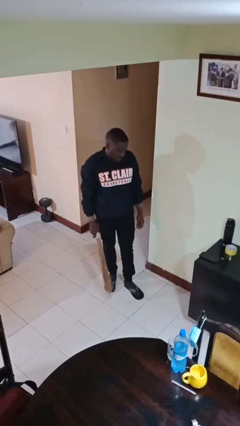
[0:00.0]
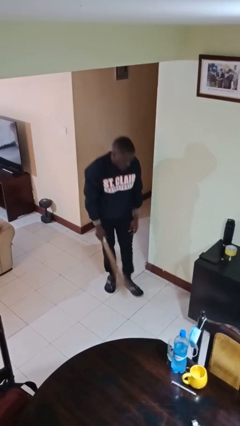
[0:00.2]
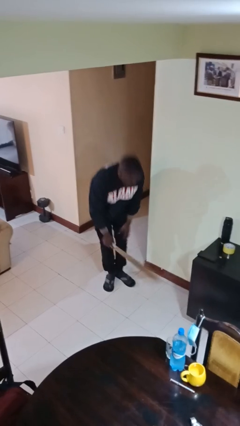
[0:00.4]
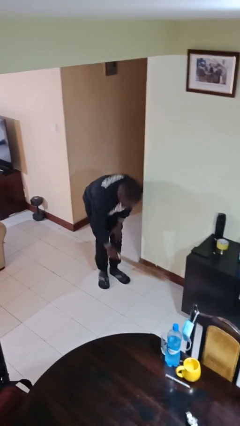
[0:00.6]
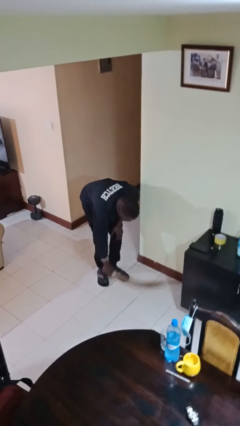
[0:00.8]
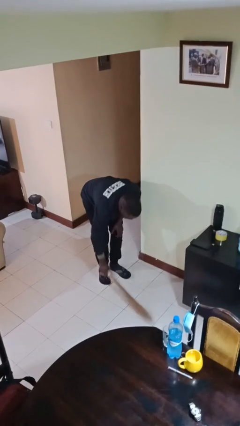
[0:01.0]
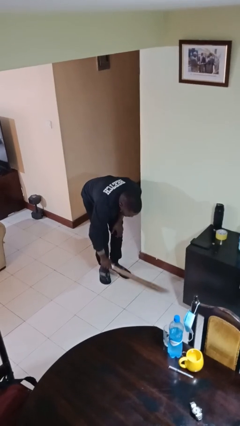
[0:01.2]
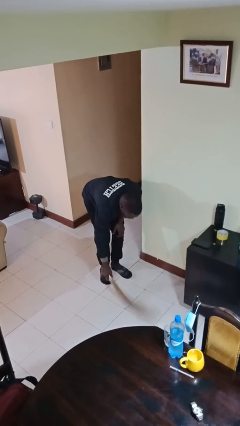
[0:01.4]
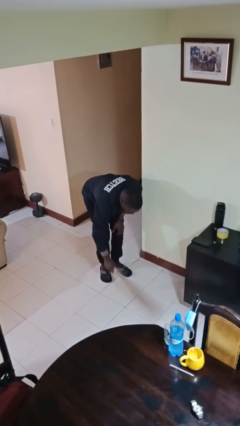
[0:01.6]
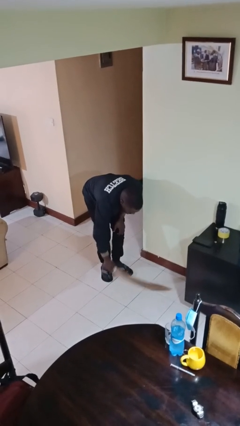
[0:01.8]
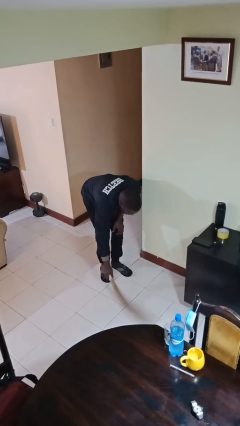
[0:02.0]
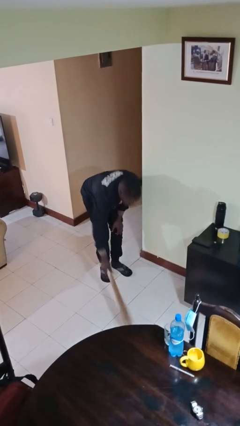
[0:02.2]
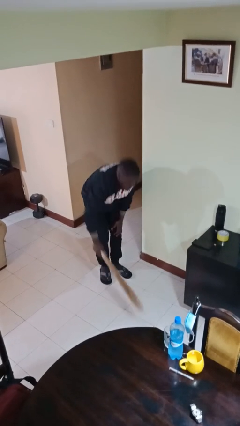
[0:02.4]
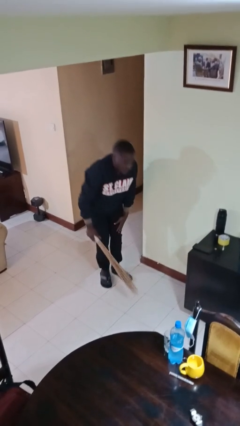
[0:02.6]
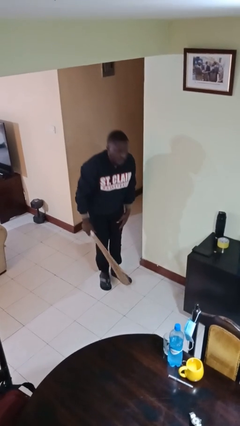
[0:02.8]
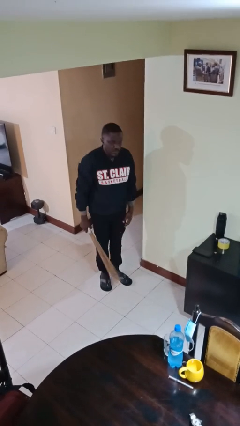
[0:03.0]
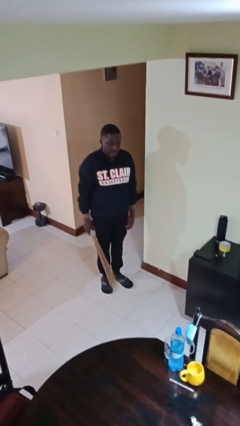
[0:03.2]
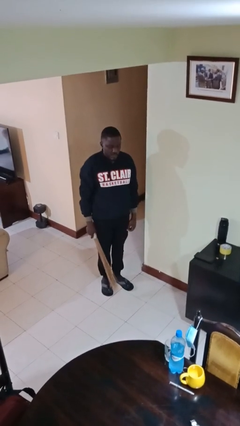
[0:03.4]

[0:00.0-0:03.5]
person sweeps floor

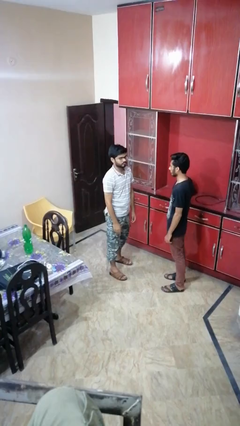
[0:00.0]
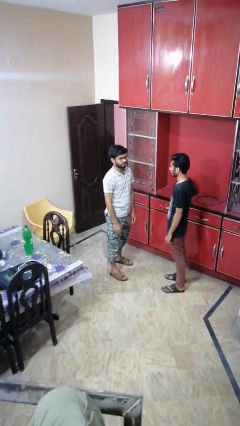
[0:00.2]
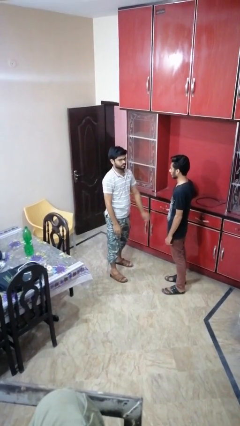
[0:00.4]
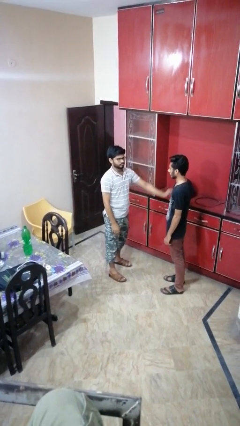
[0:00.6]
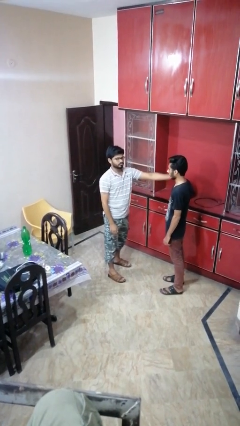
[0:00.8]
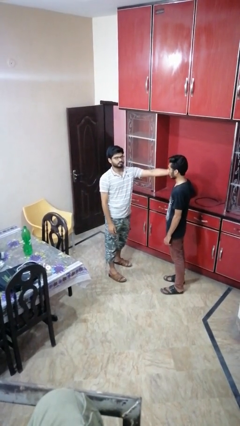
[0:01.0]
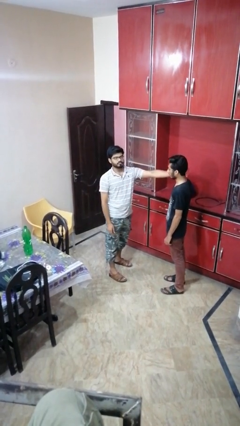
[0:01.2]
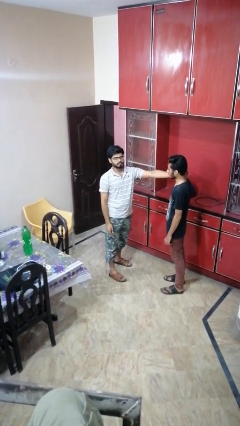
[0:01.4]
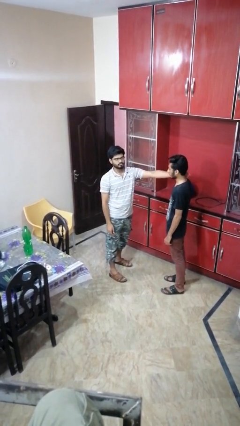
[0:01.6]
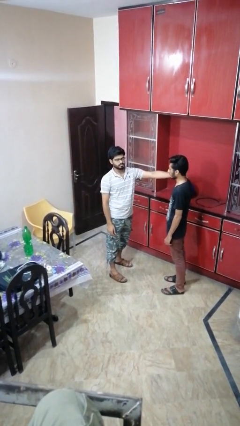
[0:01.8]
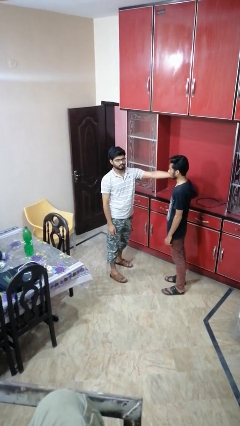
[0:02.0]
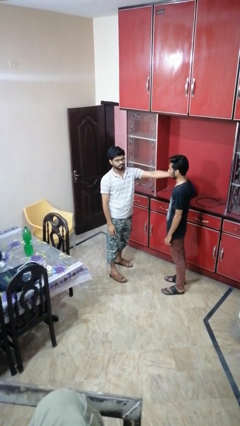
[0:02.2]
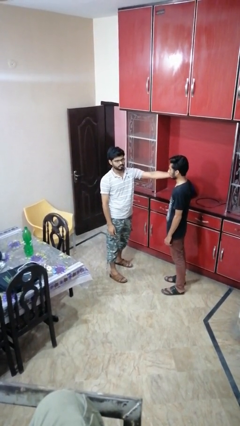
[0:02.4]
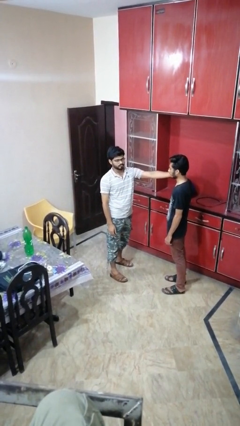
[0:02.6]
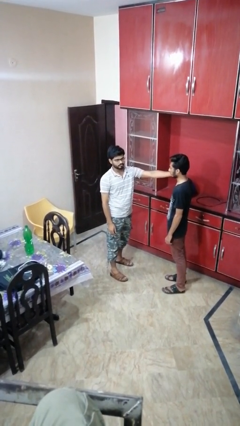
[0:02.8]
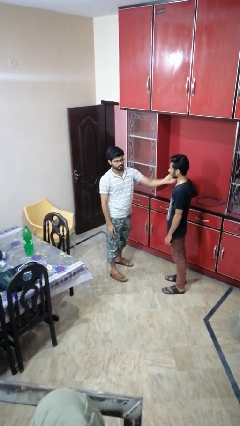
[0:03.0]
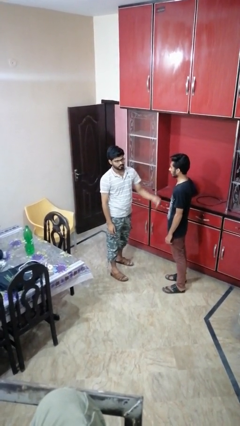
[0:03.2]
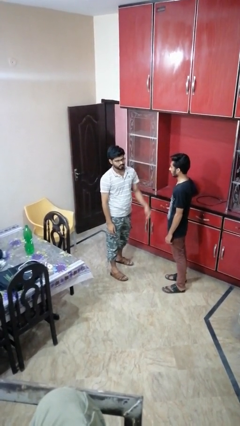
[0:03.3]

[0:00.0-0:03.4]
person touches face of person

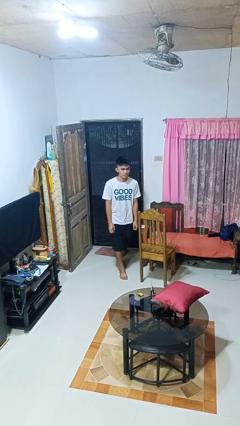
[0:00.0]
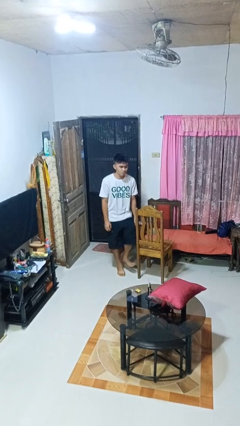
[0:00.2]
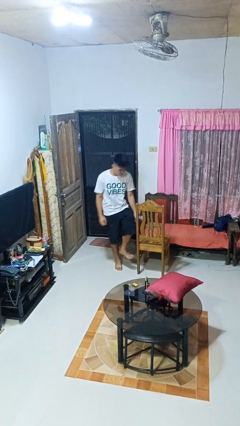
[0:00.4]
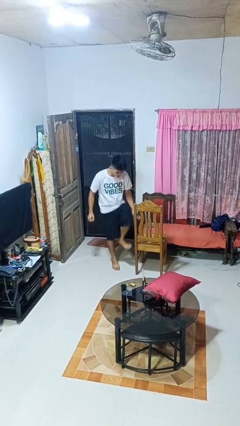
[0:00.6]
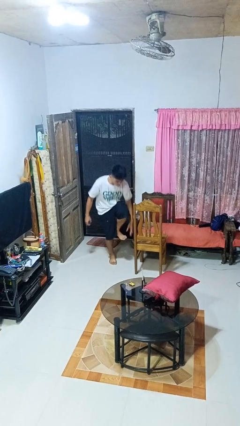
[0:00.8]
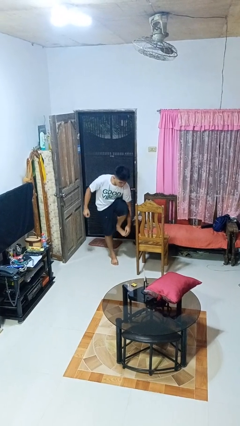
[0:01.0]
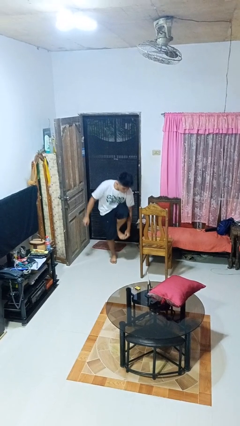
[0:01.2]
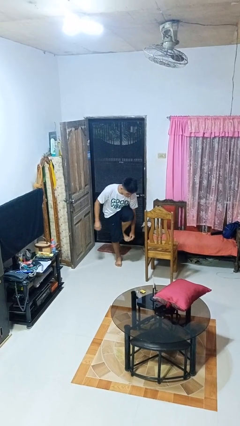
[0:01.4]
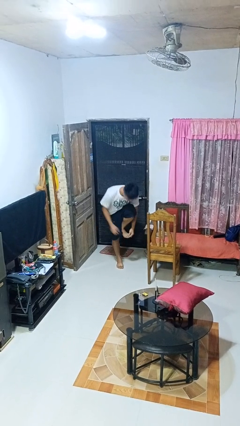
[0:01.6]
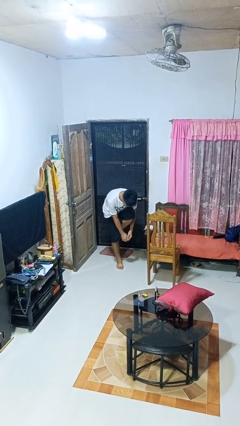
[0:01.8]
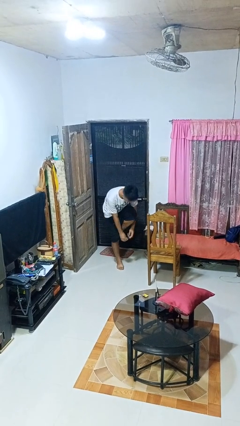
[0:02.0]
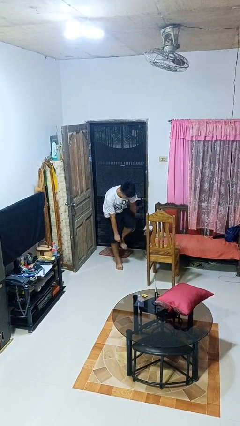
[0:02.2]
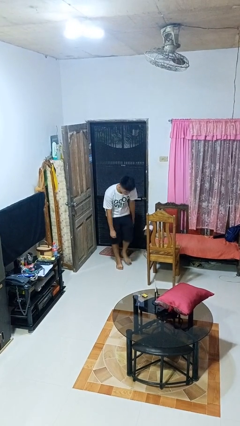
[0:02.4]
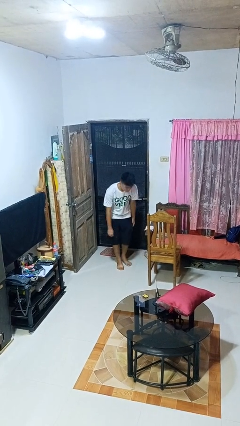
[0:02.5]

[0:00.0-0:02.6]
person stubs toe

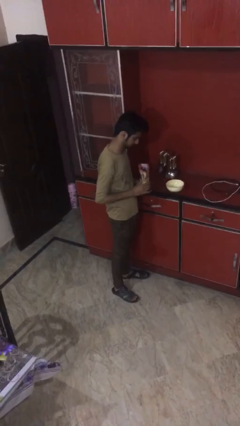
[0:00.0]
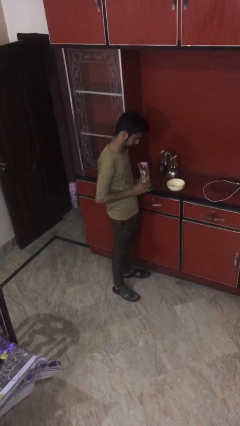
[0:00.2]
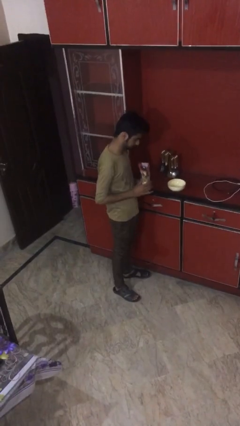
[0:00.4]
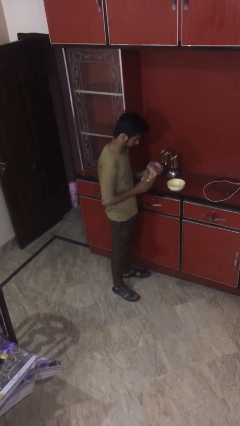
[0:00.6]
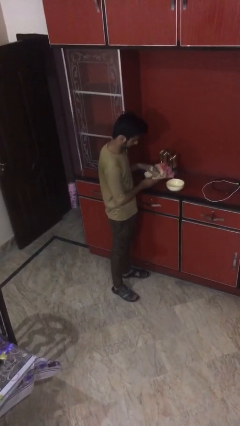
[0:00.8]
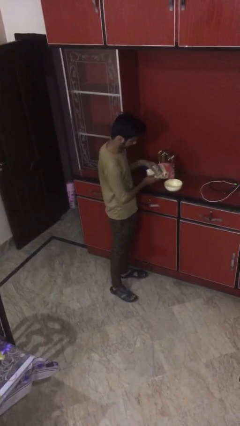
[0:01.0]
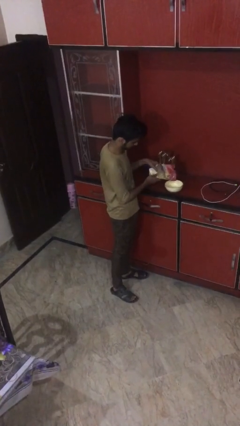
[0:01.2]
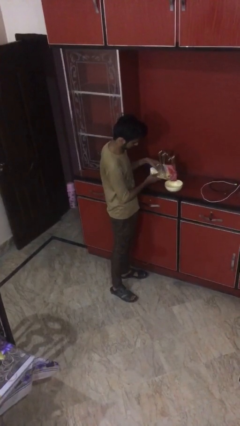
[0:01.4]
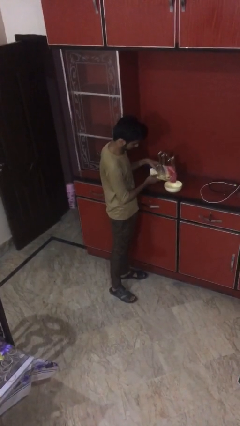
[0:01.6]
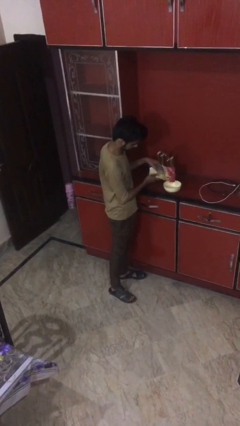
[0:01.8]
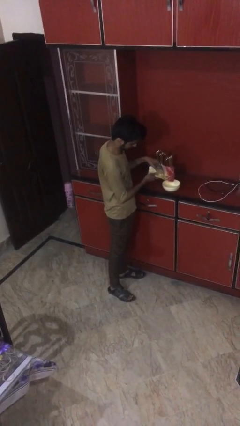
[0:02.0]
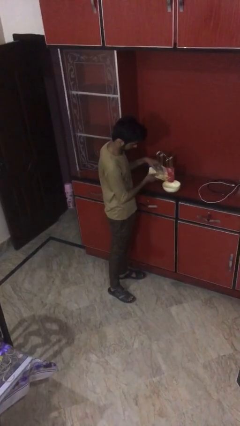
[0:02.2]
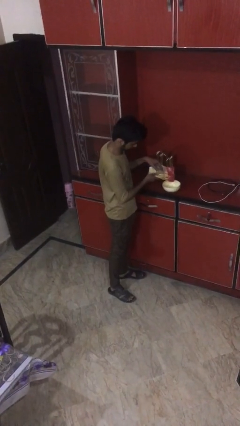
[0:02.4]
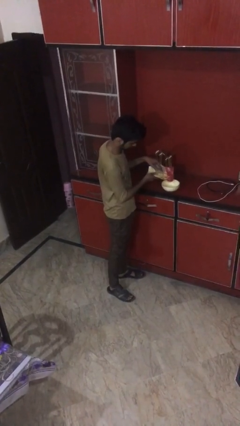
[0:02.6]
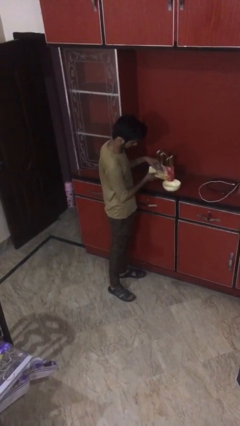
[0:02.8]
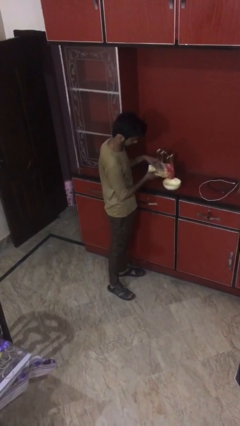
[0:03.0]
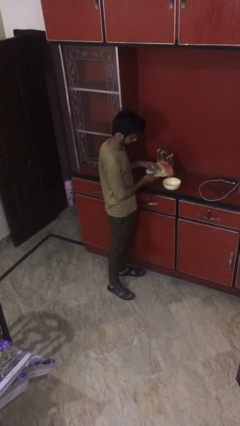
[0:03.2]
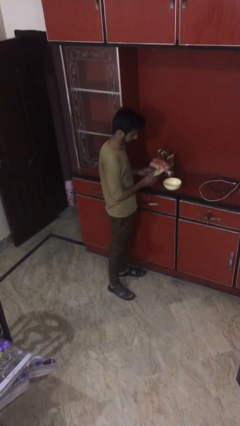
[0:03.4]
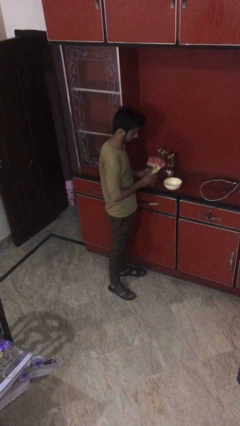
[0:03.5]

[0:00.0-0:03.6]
person pours into bowl

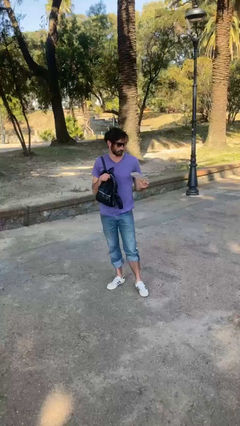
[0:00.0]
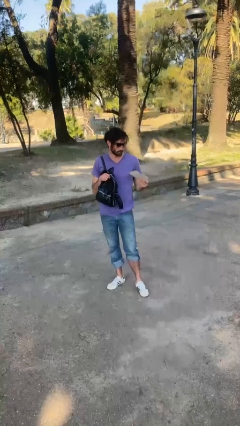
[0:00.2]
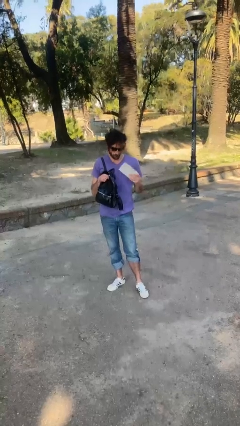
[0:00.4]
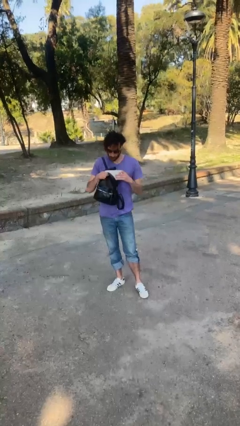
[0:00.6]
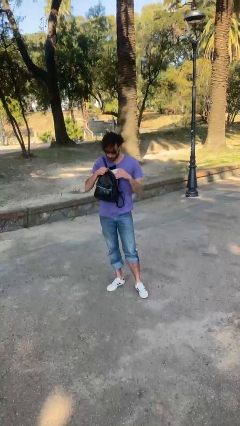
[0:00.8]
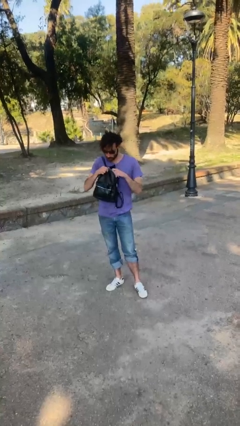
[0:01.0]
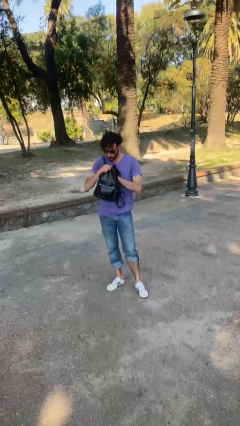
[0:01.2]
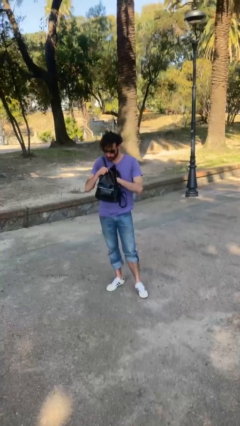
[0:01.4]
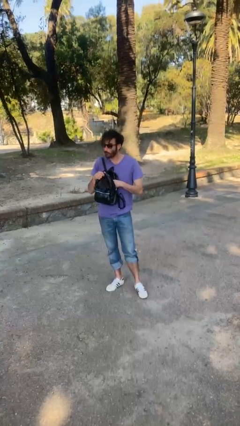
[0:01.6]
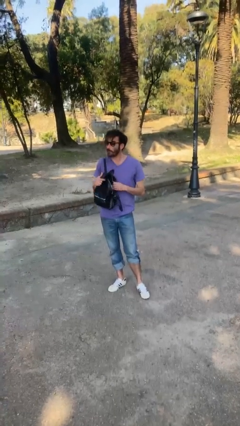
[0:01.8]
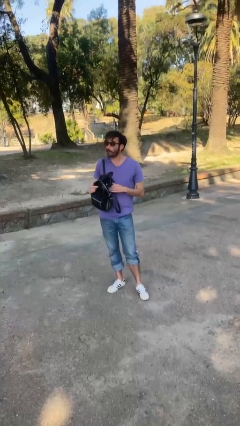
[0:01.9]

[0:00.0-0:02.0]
person puts object into purse

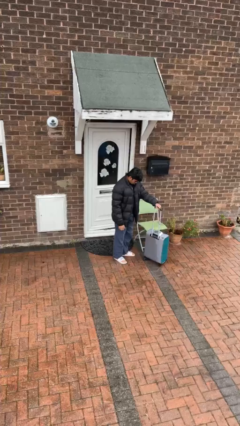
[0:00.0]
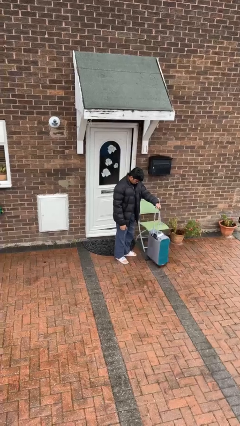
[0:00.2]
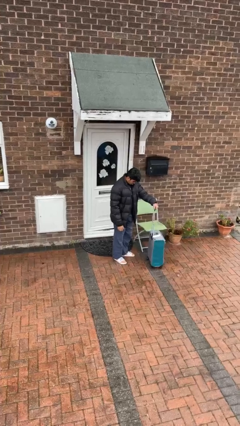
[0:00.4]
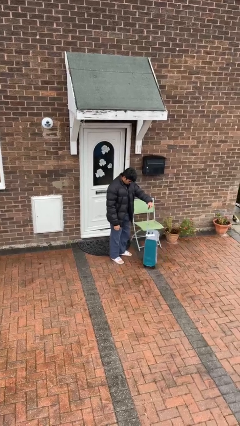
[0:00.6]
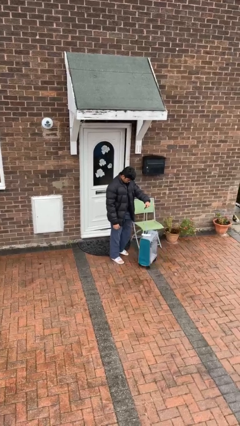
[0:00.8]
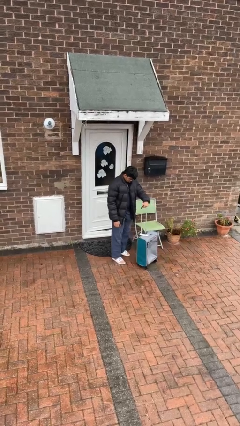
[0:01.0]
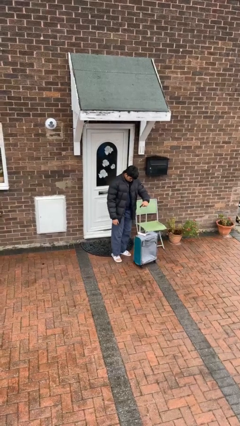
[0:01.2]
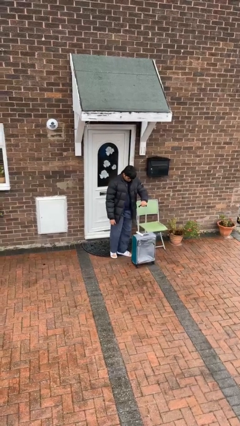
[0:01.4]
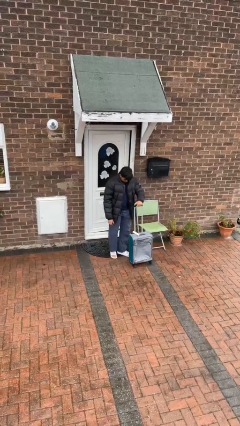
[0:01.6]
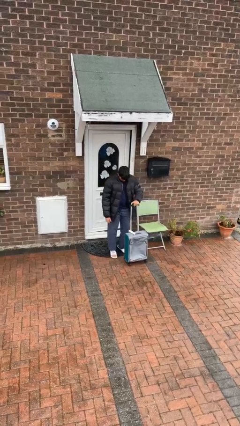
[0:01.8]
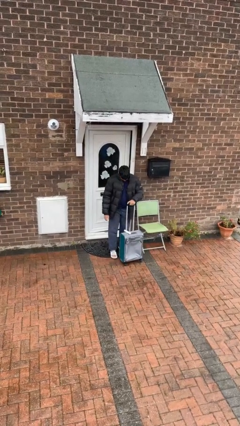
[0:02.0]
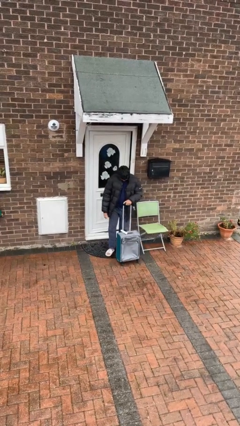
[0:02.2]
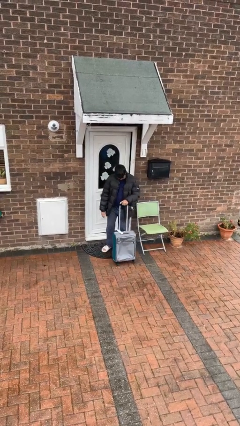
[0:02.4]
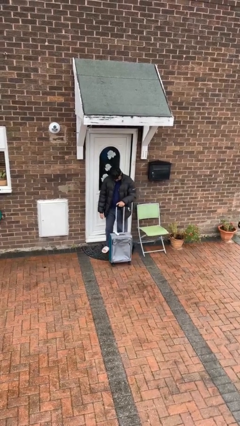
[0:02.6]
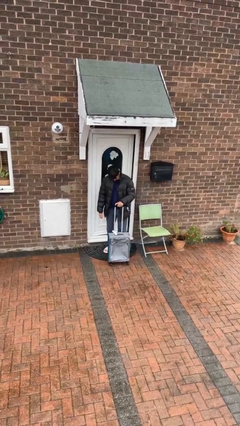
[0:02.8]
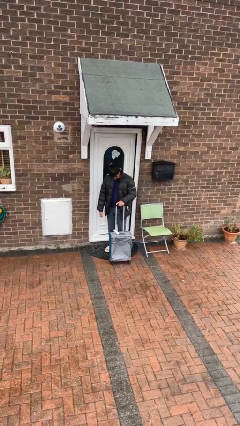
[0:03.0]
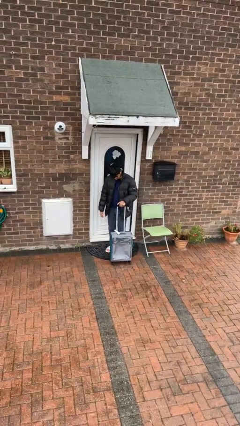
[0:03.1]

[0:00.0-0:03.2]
person pulls wheeled cart
